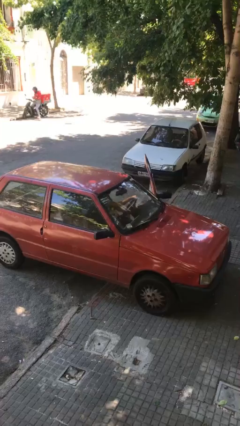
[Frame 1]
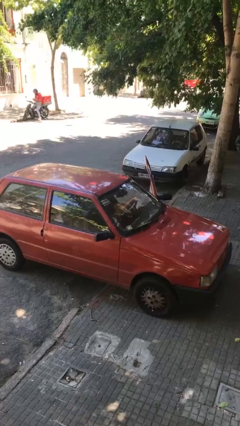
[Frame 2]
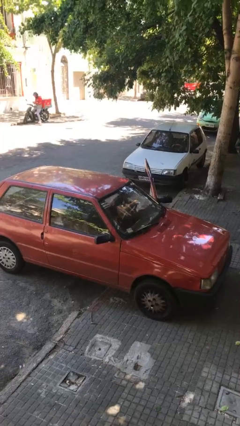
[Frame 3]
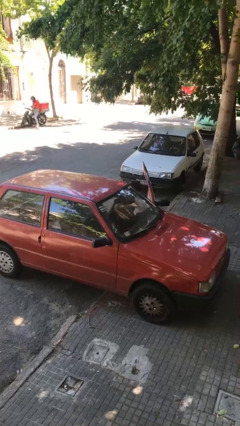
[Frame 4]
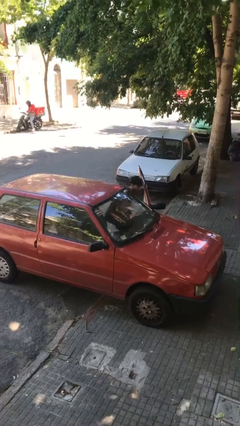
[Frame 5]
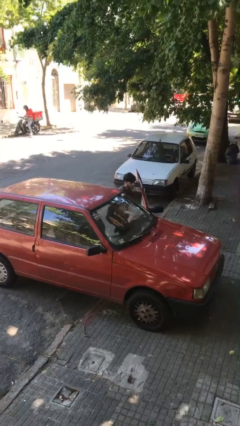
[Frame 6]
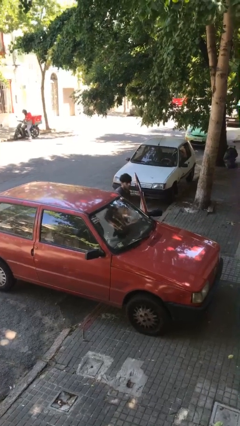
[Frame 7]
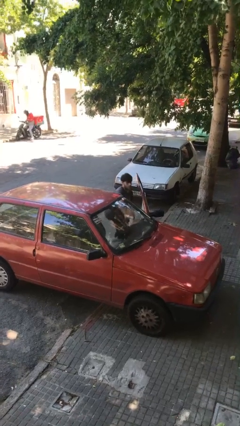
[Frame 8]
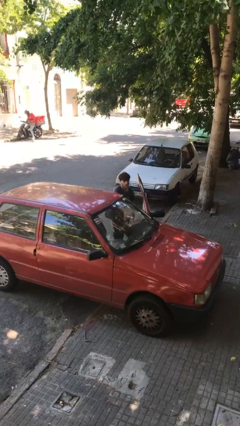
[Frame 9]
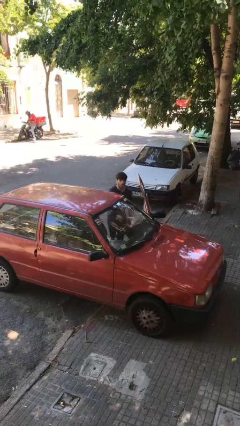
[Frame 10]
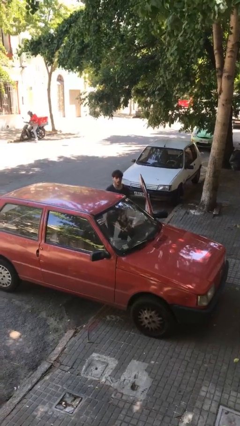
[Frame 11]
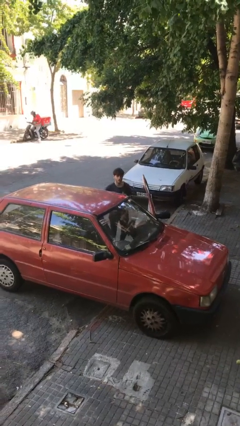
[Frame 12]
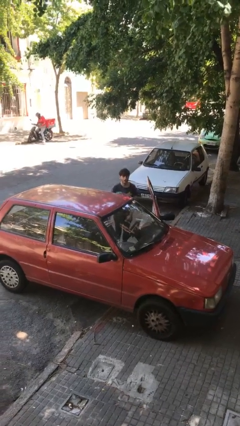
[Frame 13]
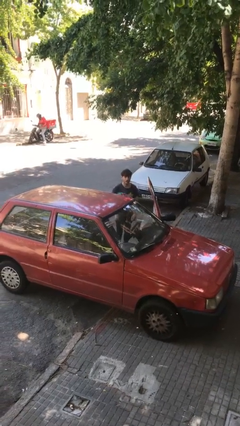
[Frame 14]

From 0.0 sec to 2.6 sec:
person exits car

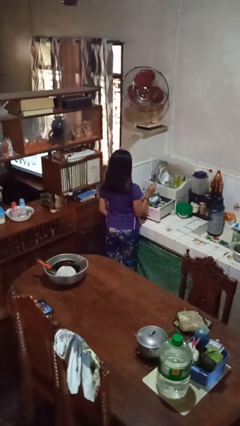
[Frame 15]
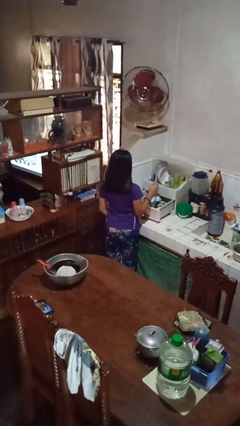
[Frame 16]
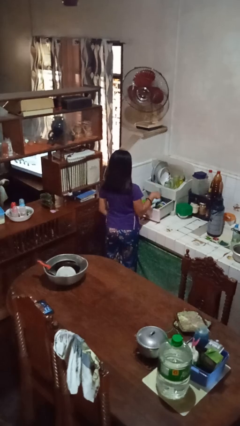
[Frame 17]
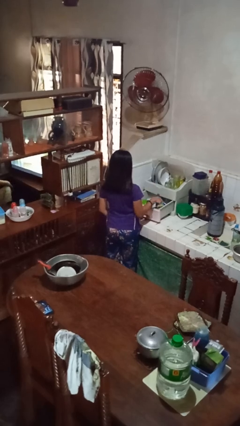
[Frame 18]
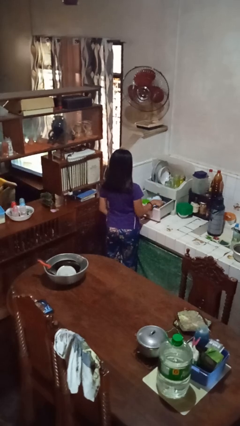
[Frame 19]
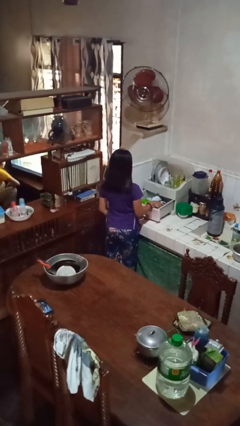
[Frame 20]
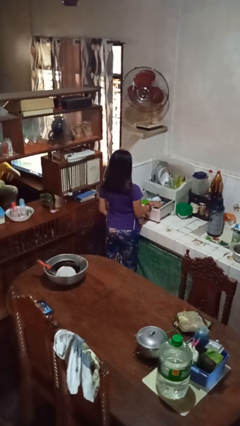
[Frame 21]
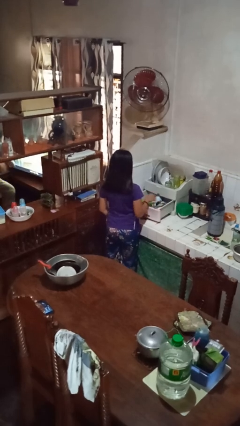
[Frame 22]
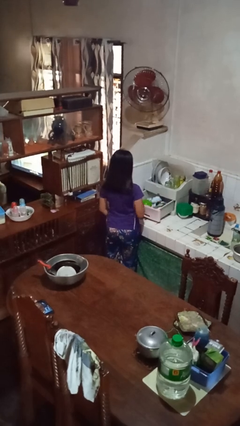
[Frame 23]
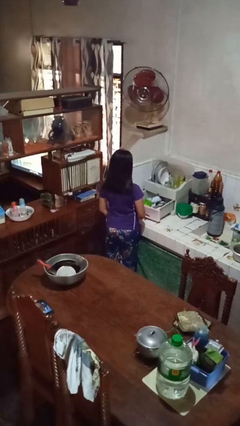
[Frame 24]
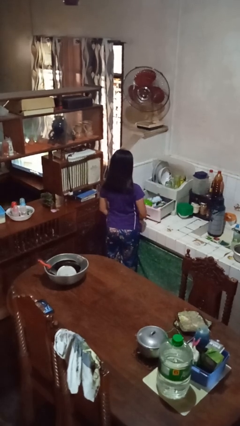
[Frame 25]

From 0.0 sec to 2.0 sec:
person puts object into kitchen drawer

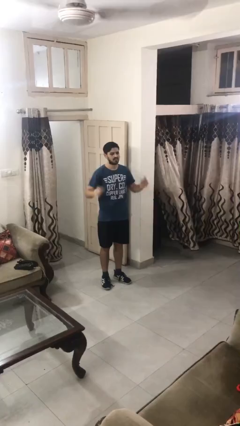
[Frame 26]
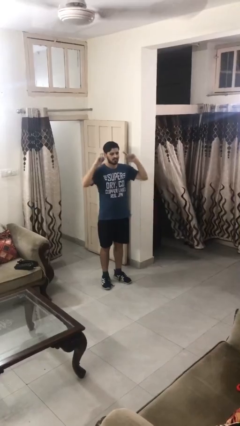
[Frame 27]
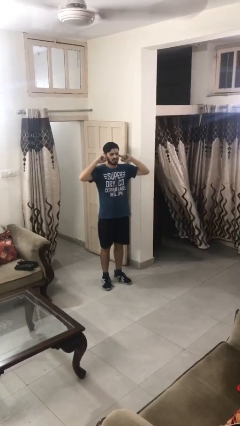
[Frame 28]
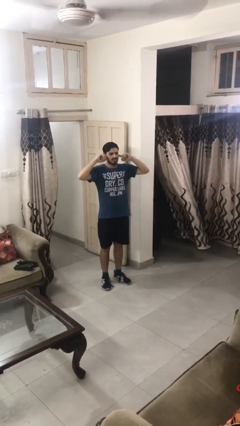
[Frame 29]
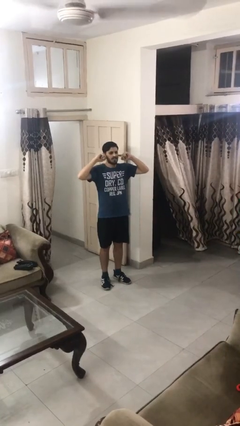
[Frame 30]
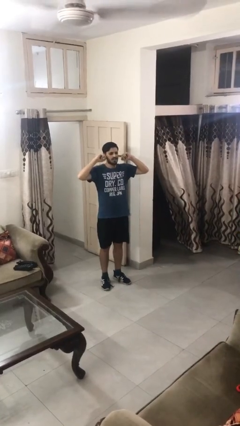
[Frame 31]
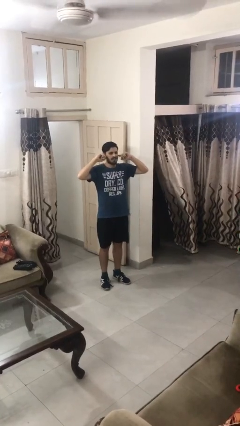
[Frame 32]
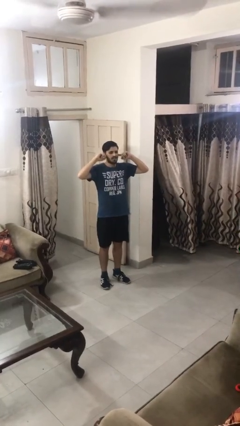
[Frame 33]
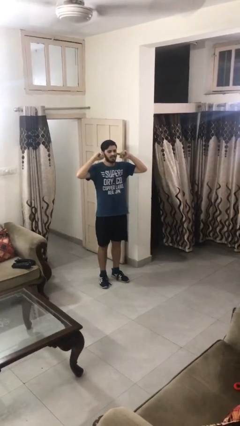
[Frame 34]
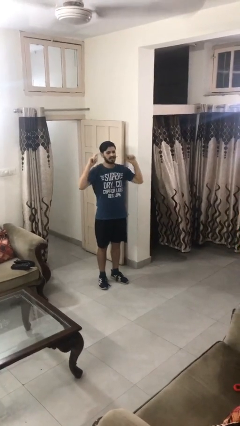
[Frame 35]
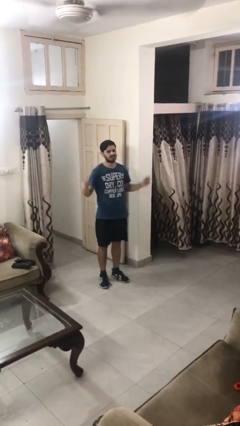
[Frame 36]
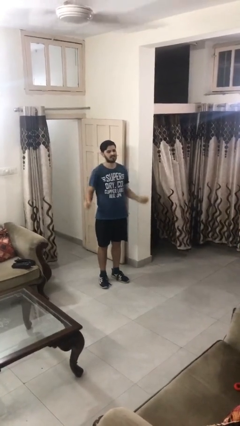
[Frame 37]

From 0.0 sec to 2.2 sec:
person puts fingers in ear

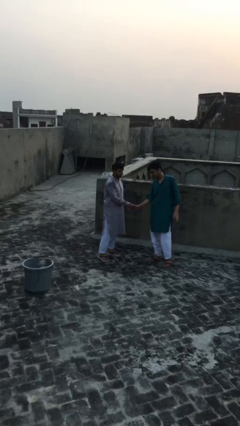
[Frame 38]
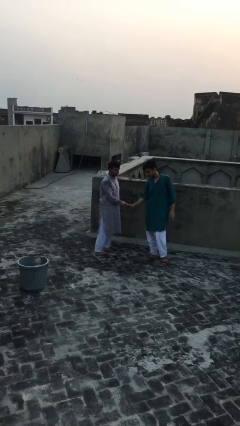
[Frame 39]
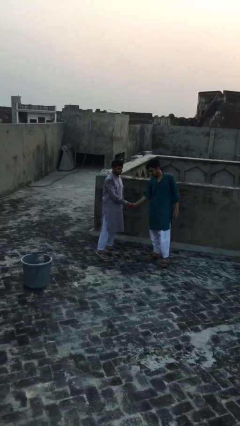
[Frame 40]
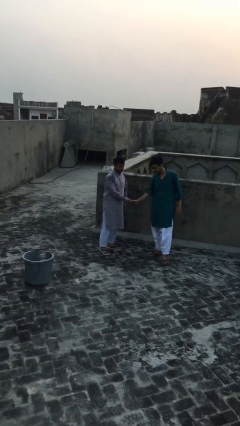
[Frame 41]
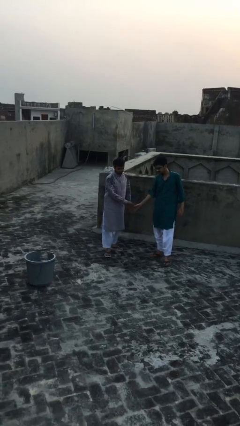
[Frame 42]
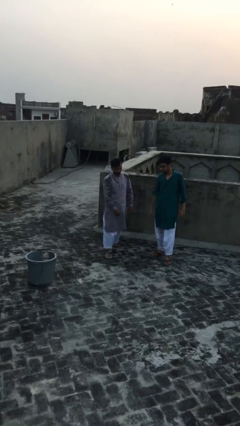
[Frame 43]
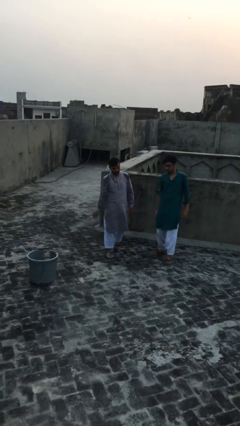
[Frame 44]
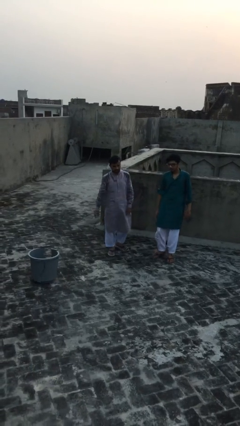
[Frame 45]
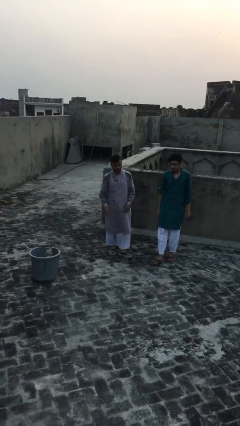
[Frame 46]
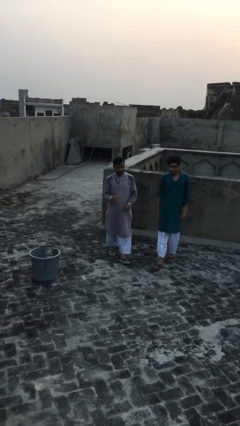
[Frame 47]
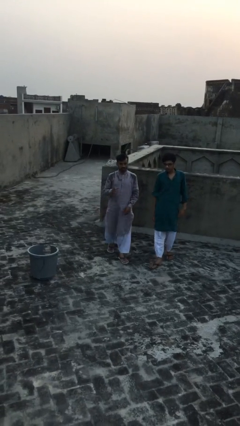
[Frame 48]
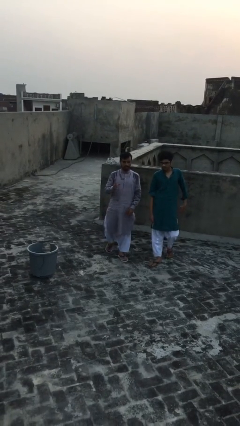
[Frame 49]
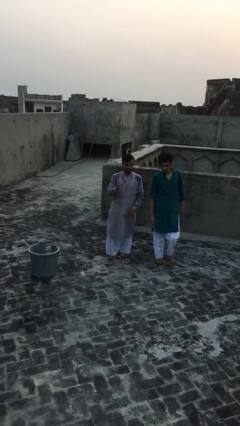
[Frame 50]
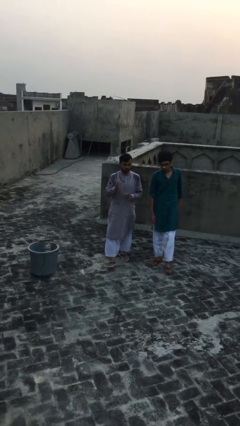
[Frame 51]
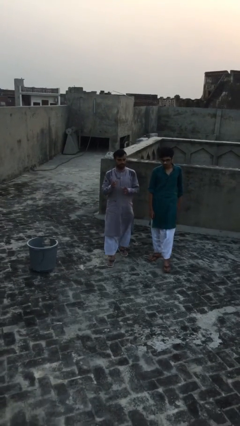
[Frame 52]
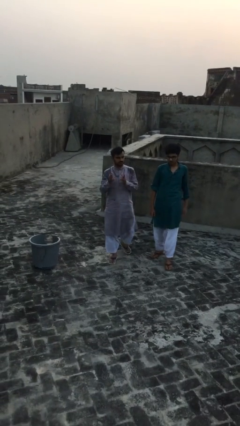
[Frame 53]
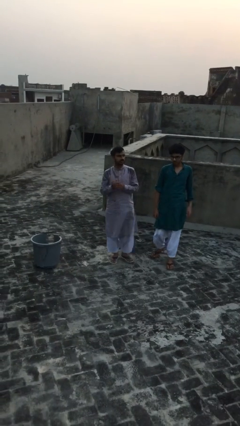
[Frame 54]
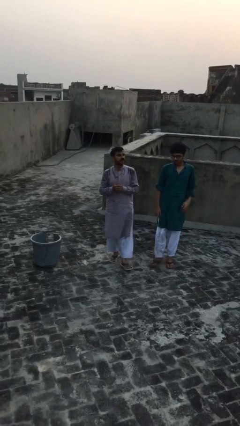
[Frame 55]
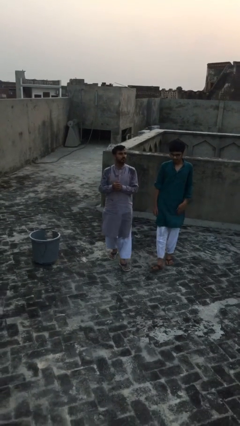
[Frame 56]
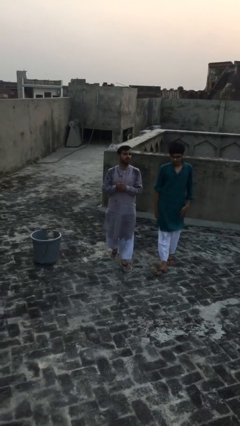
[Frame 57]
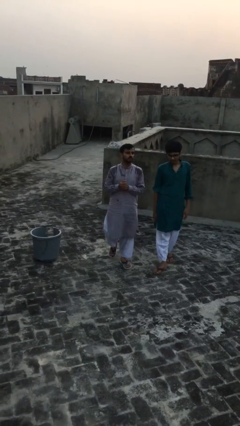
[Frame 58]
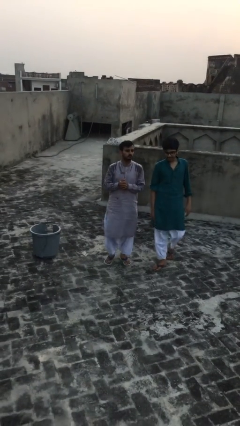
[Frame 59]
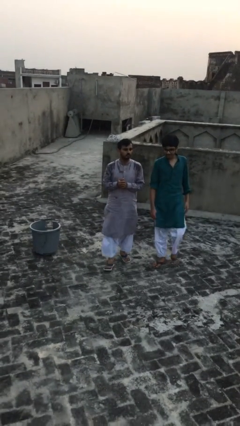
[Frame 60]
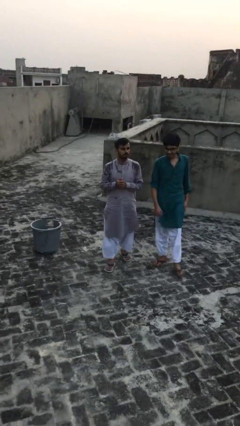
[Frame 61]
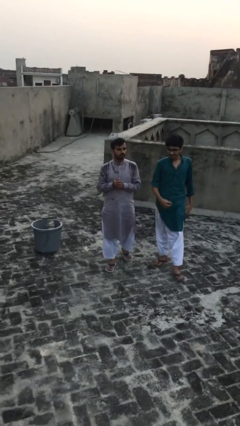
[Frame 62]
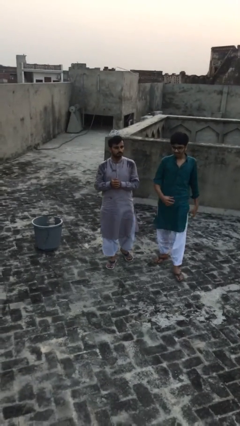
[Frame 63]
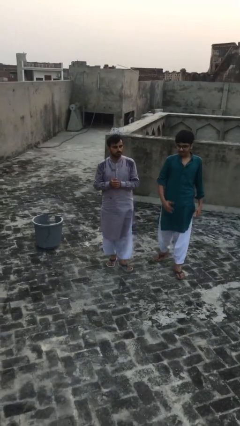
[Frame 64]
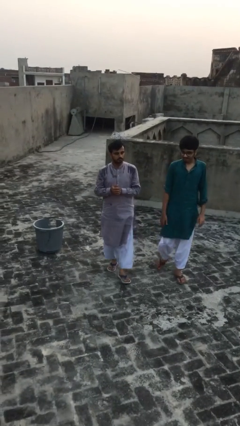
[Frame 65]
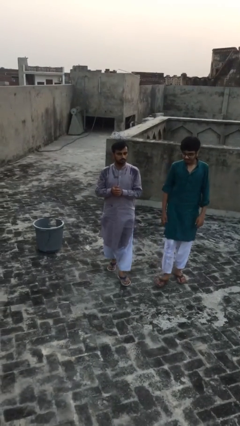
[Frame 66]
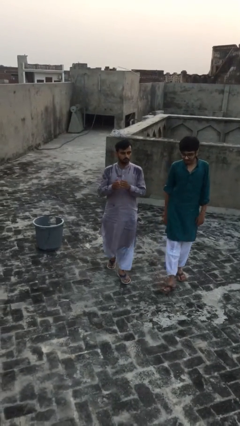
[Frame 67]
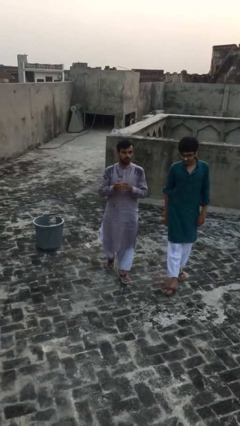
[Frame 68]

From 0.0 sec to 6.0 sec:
person talks to person

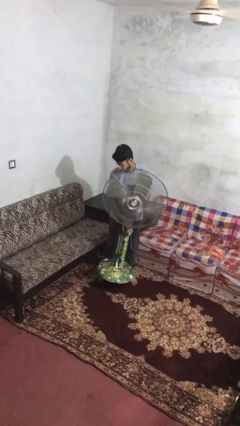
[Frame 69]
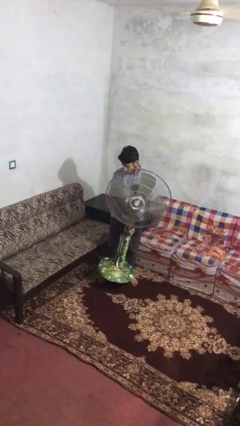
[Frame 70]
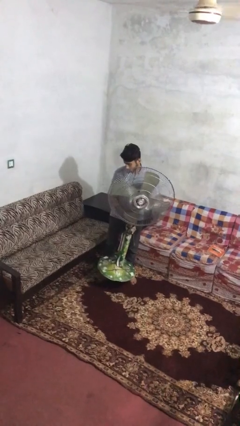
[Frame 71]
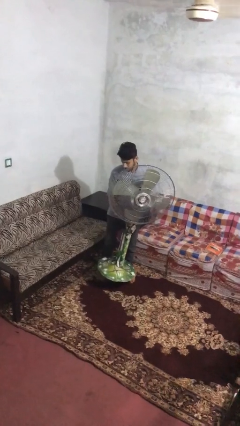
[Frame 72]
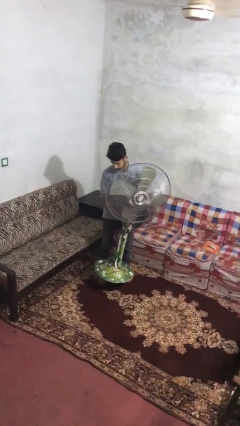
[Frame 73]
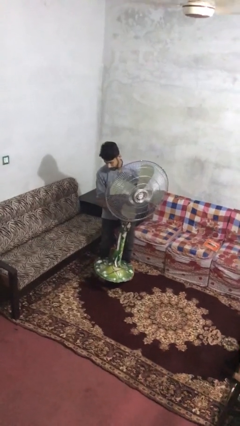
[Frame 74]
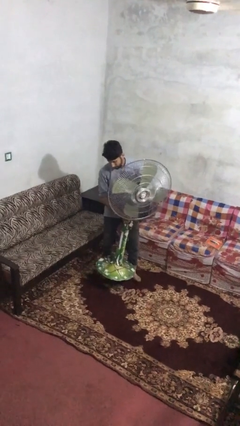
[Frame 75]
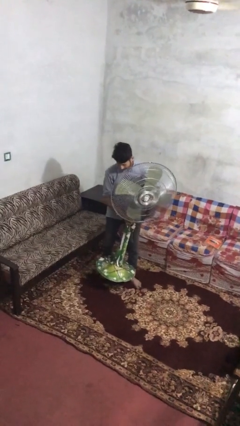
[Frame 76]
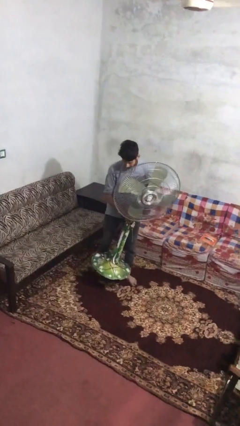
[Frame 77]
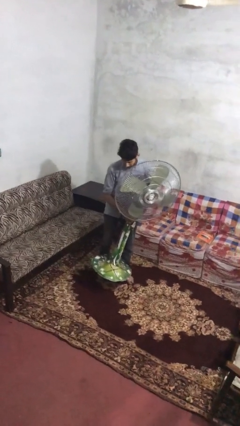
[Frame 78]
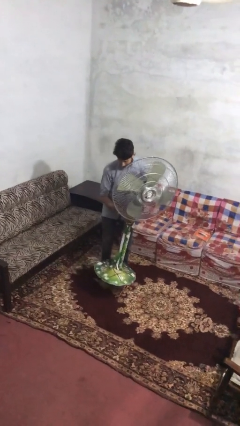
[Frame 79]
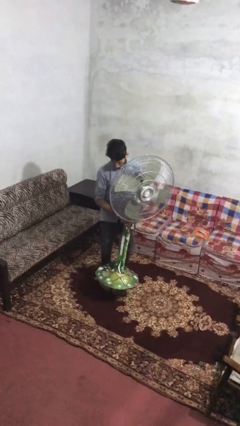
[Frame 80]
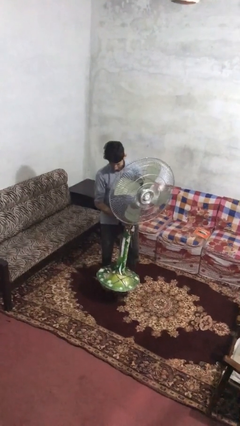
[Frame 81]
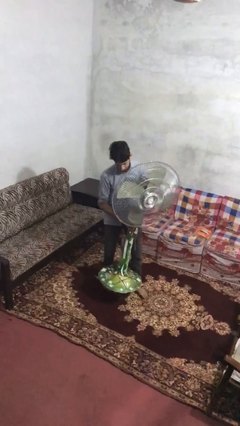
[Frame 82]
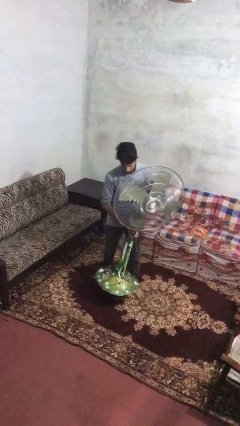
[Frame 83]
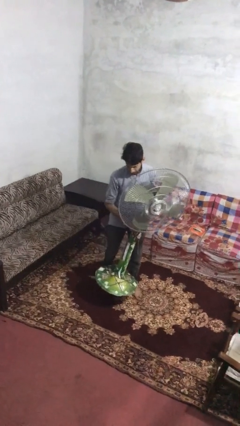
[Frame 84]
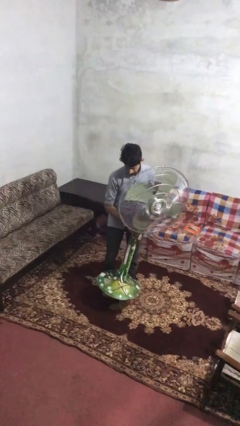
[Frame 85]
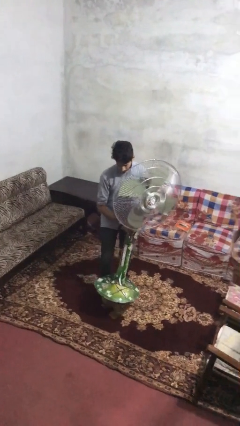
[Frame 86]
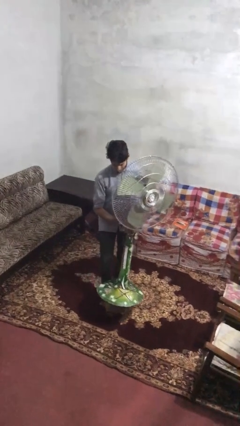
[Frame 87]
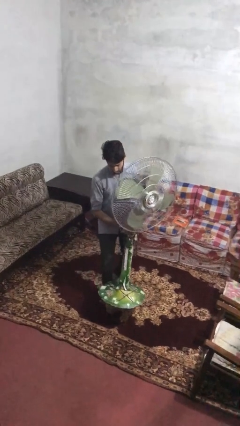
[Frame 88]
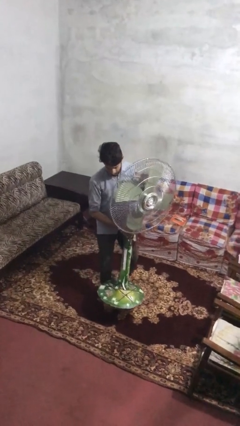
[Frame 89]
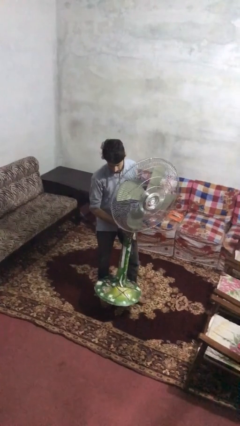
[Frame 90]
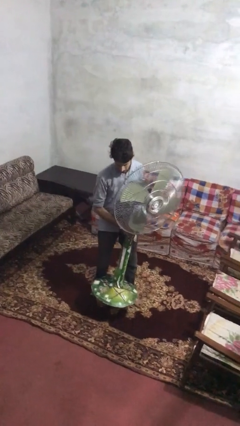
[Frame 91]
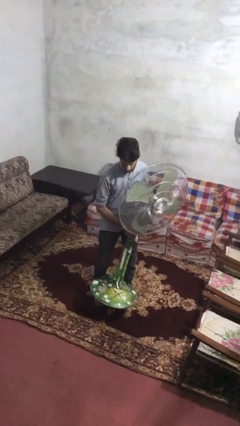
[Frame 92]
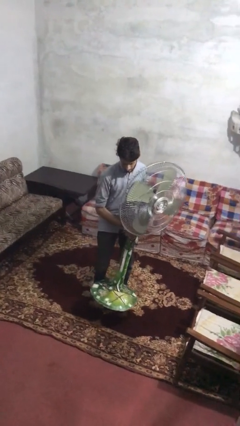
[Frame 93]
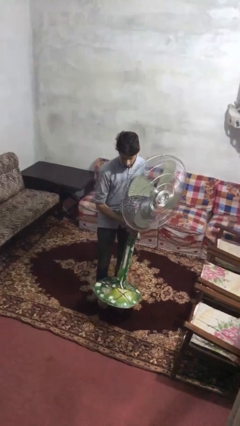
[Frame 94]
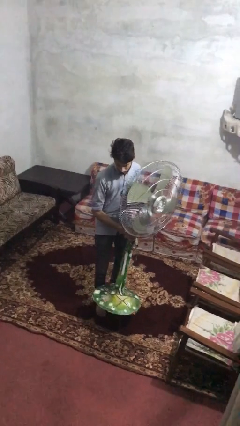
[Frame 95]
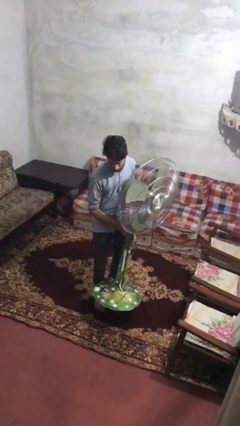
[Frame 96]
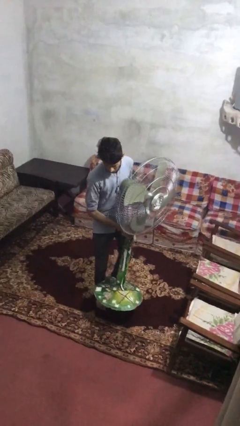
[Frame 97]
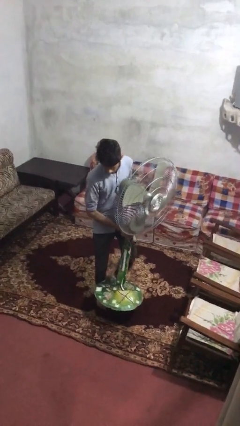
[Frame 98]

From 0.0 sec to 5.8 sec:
person carries heavy object
